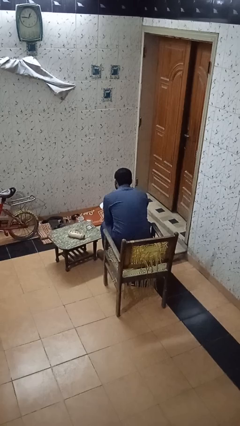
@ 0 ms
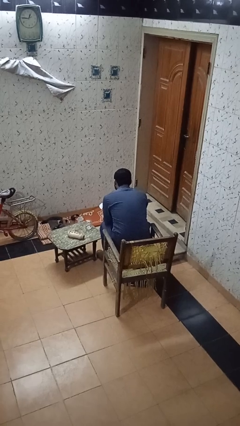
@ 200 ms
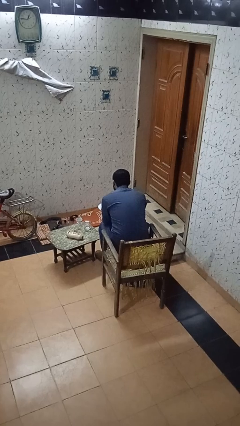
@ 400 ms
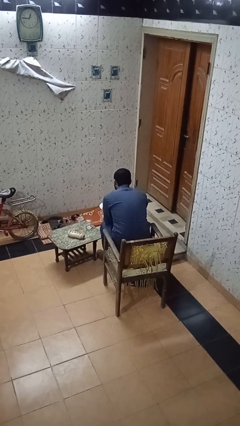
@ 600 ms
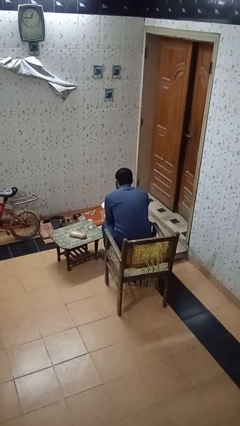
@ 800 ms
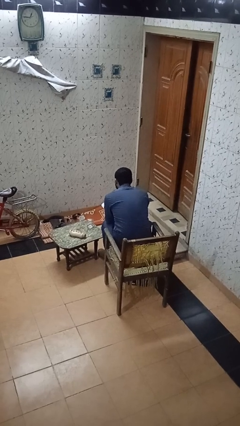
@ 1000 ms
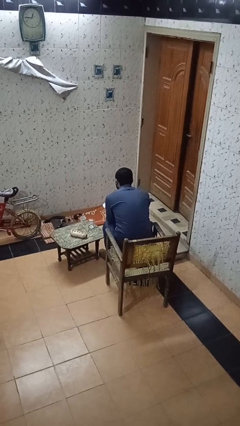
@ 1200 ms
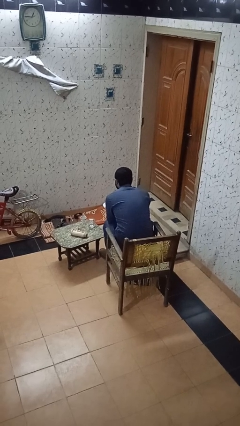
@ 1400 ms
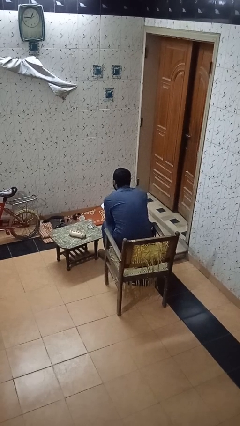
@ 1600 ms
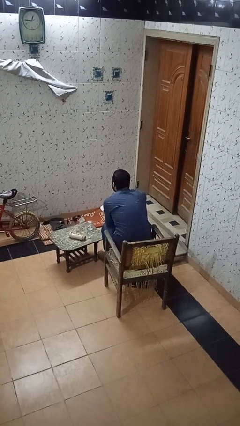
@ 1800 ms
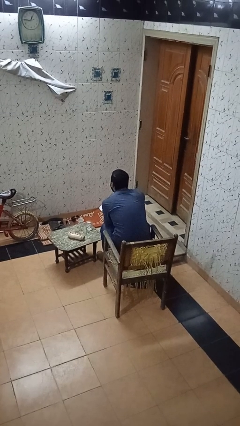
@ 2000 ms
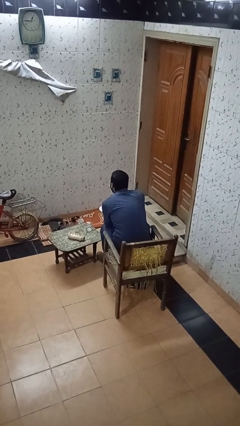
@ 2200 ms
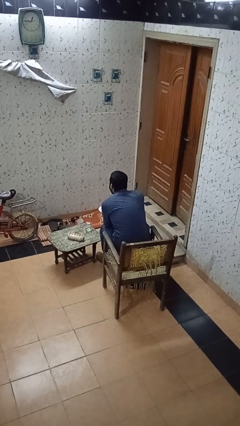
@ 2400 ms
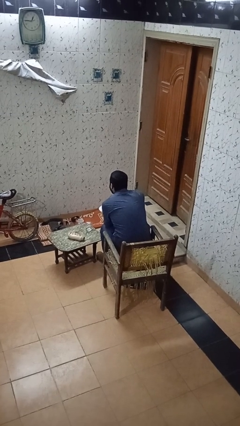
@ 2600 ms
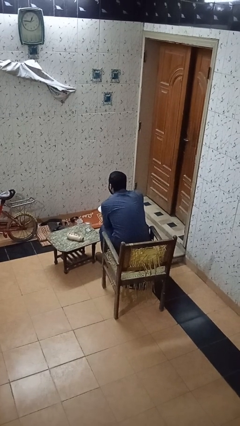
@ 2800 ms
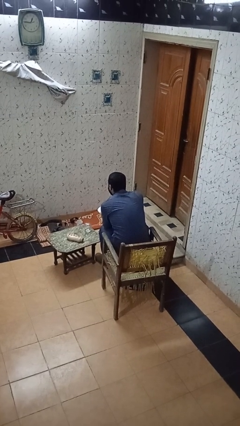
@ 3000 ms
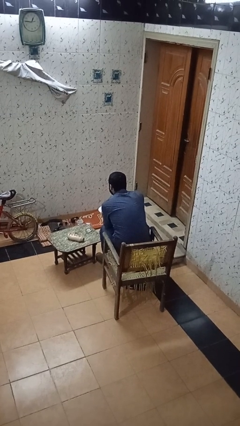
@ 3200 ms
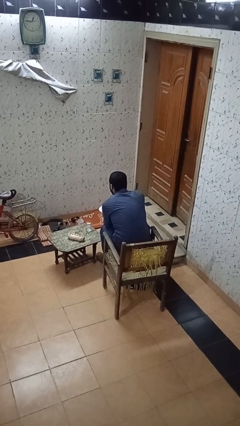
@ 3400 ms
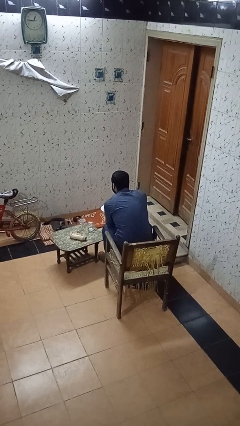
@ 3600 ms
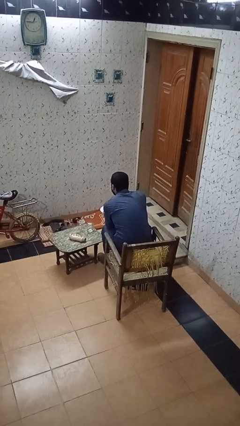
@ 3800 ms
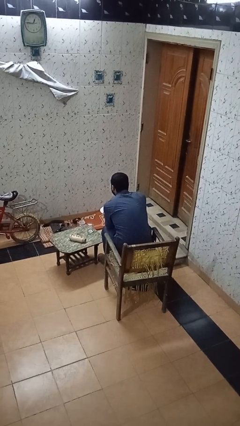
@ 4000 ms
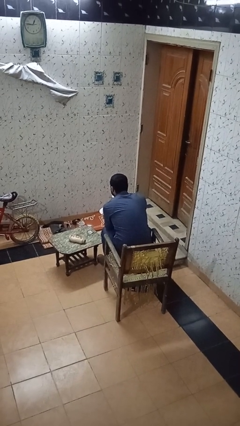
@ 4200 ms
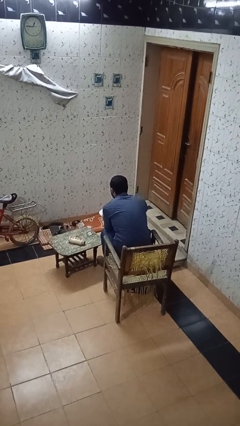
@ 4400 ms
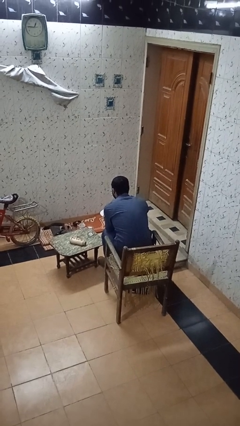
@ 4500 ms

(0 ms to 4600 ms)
person eats with utensil

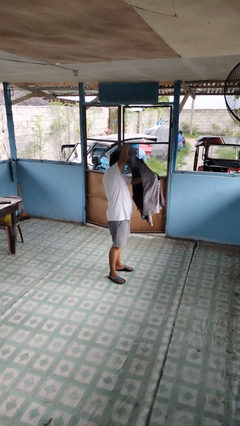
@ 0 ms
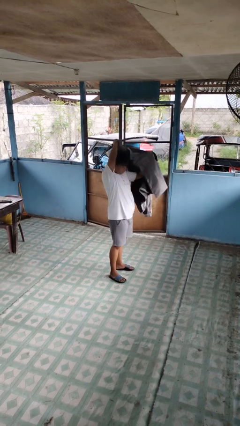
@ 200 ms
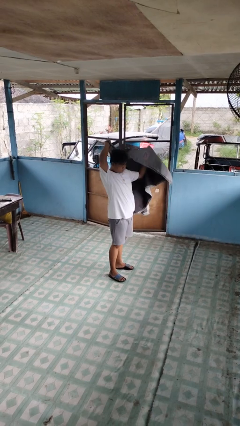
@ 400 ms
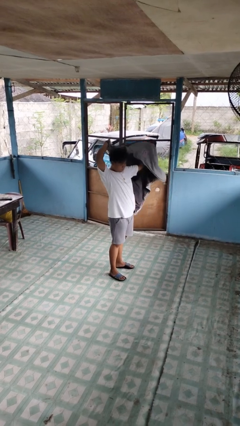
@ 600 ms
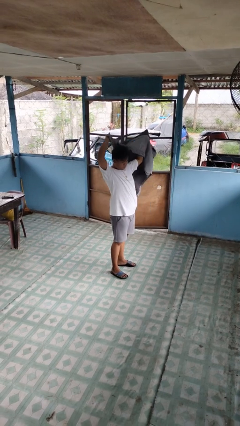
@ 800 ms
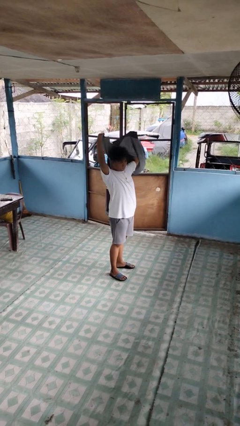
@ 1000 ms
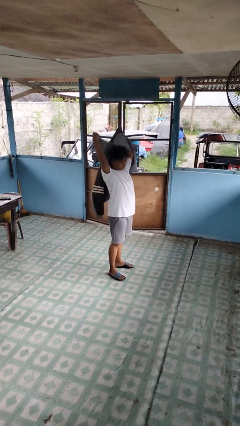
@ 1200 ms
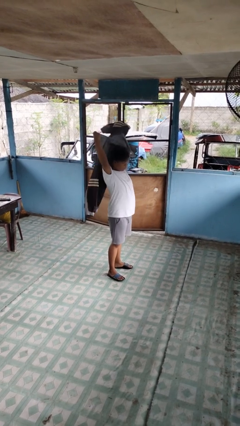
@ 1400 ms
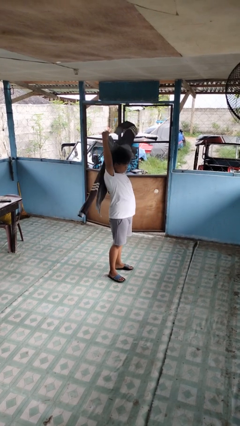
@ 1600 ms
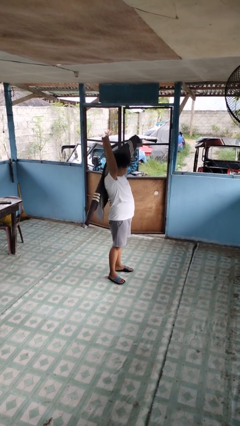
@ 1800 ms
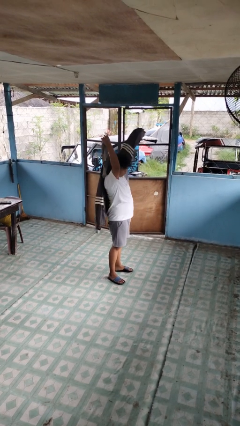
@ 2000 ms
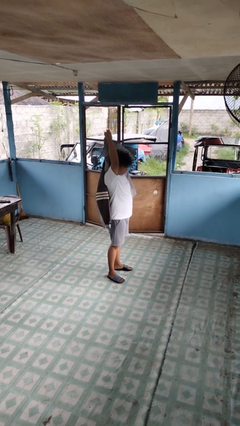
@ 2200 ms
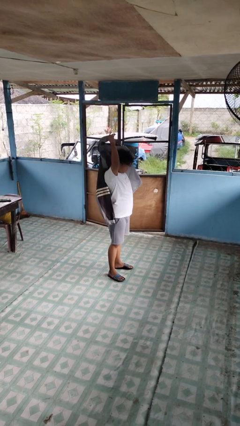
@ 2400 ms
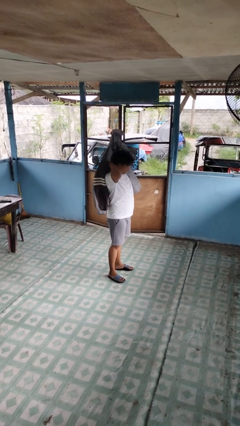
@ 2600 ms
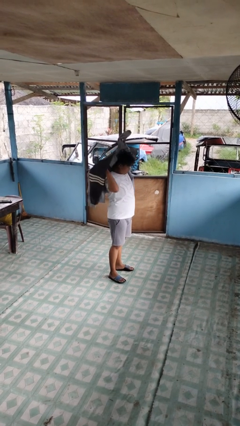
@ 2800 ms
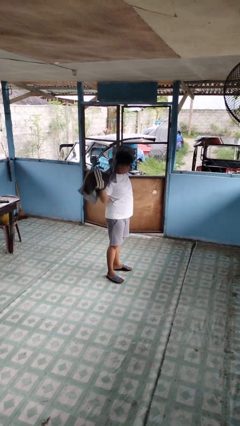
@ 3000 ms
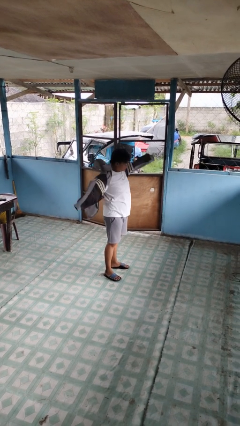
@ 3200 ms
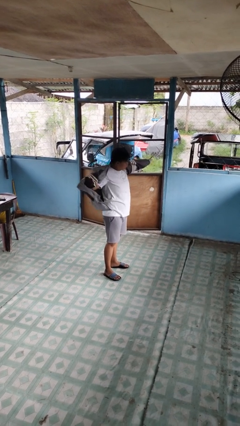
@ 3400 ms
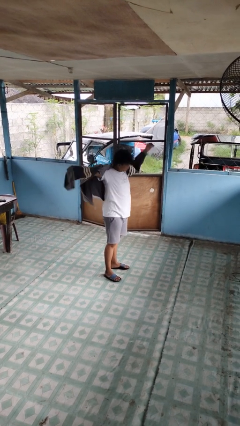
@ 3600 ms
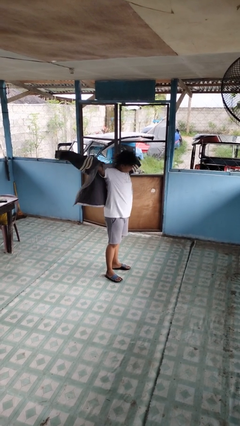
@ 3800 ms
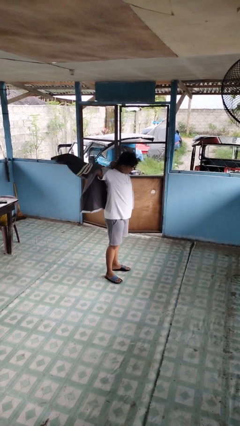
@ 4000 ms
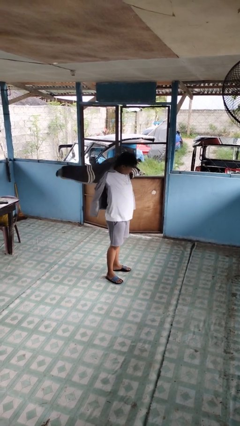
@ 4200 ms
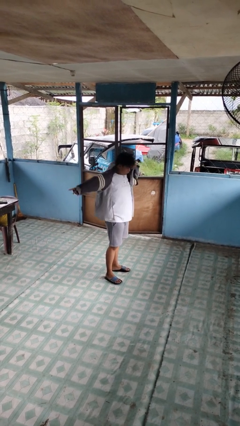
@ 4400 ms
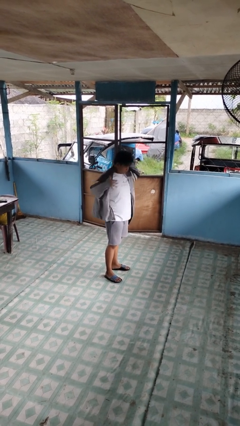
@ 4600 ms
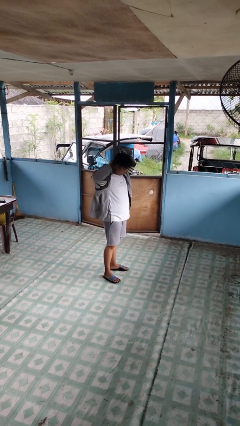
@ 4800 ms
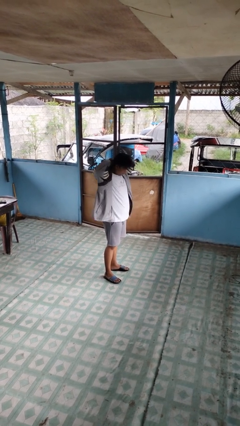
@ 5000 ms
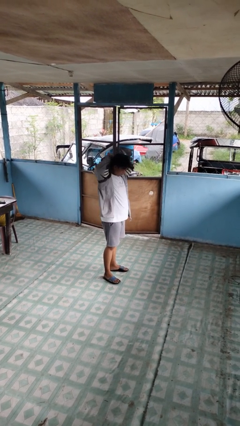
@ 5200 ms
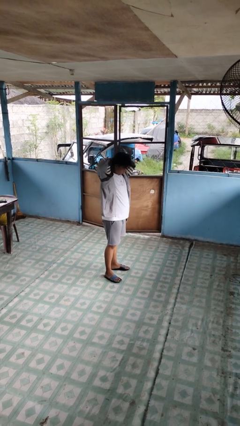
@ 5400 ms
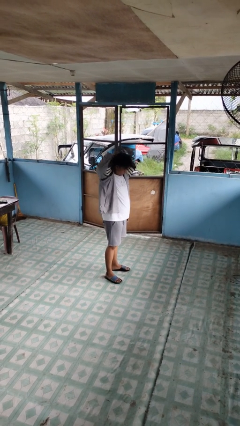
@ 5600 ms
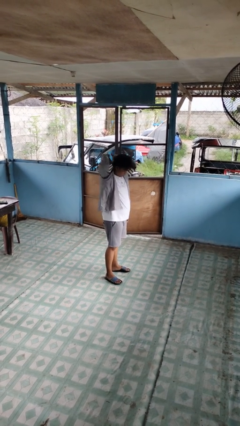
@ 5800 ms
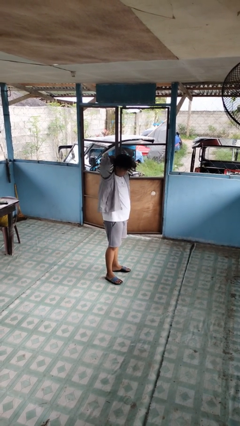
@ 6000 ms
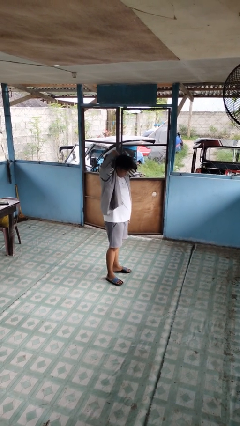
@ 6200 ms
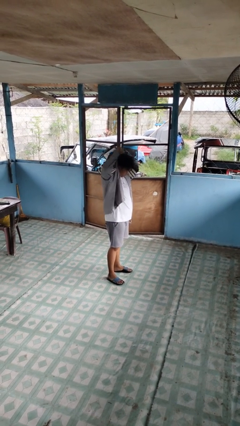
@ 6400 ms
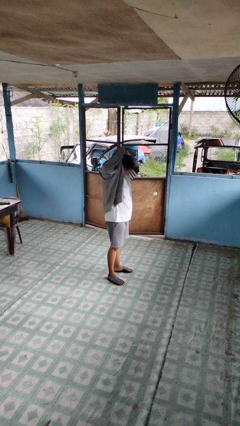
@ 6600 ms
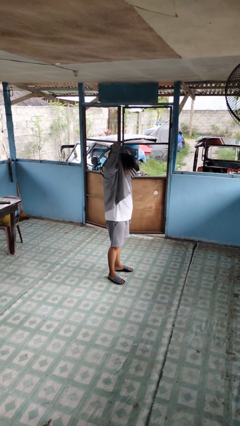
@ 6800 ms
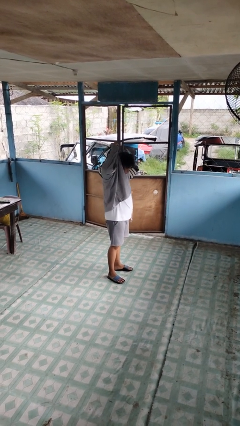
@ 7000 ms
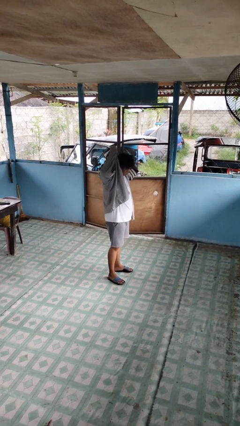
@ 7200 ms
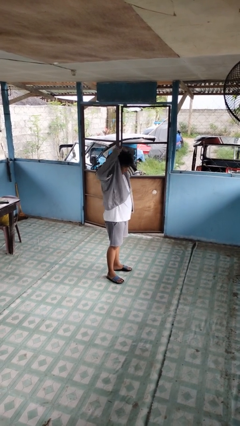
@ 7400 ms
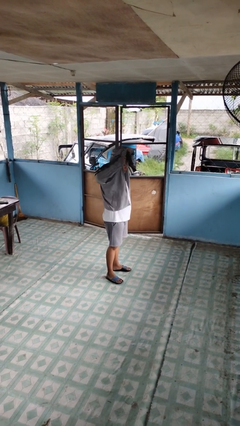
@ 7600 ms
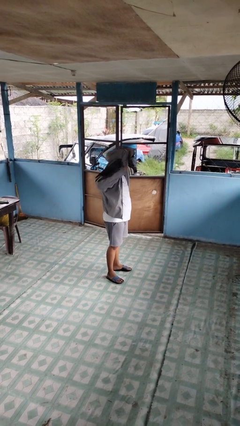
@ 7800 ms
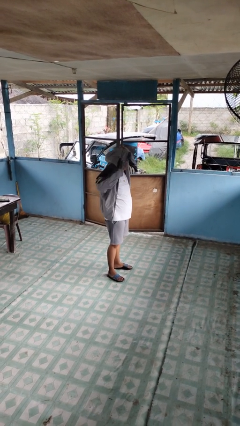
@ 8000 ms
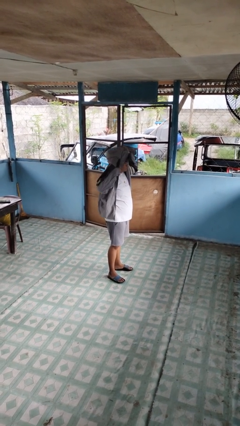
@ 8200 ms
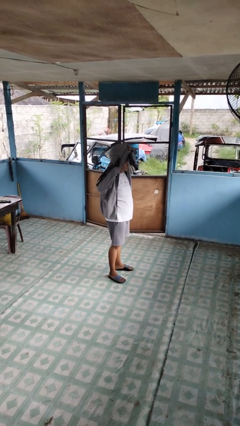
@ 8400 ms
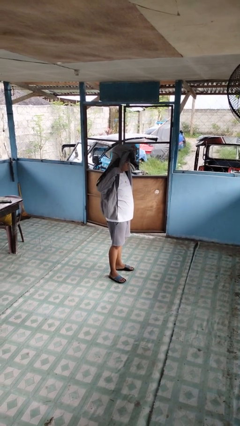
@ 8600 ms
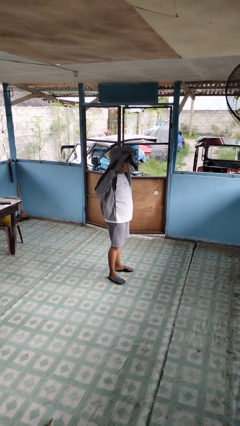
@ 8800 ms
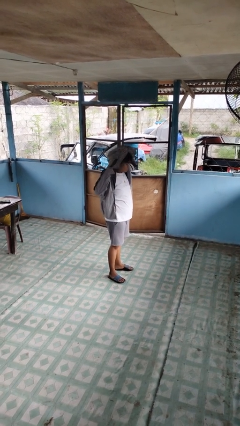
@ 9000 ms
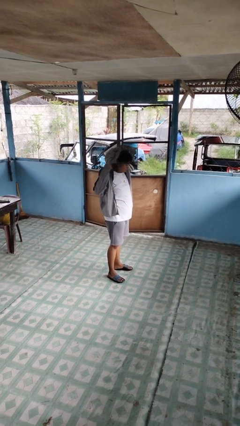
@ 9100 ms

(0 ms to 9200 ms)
person puts on hoodie

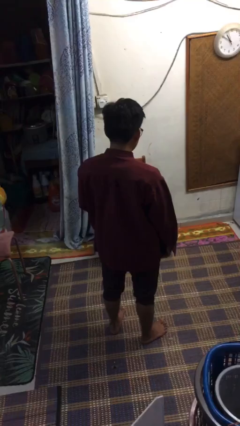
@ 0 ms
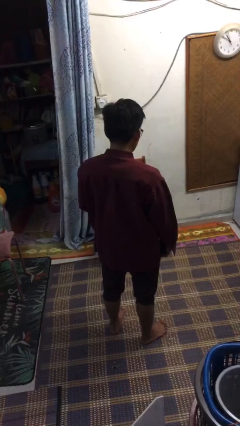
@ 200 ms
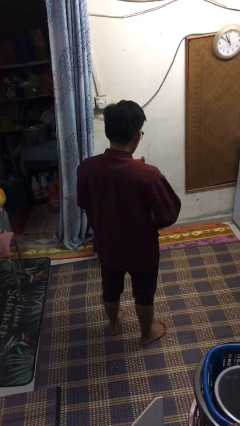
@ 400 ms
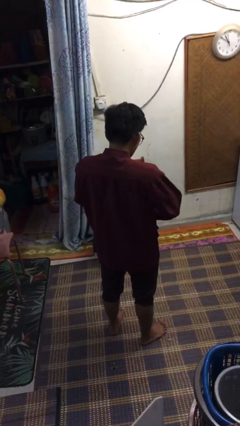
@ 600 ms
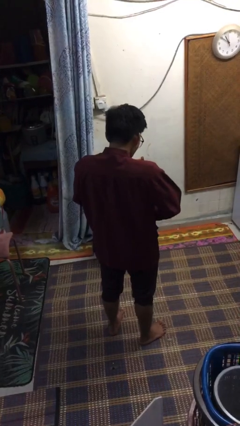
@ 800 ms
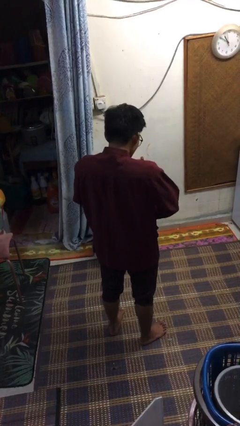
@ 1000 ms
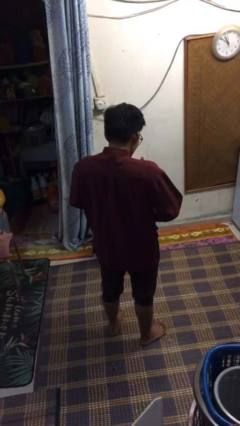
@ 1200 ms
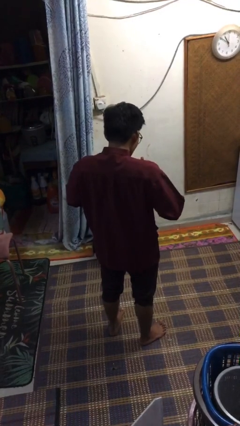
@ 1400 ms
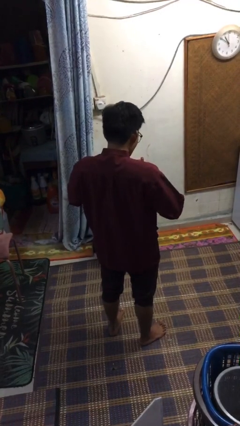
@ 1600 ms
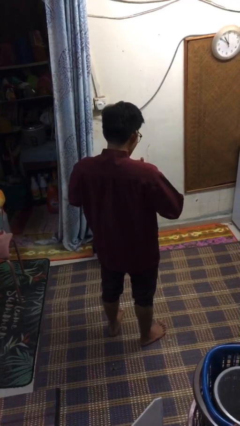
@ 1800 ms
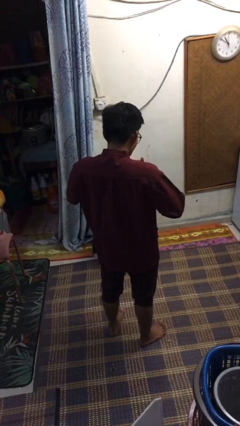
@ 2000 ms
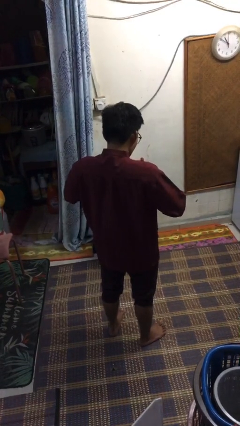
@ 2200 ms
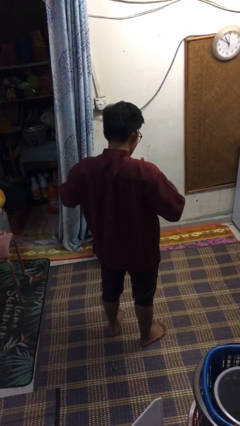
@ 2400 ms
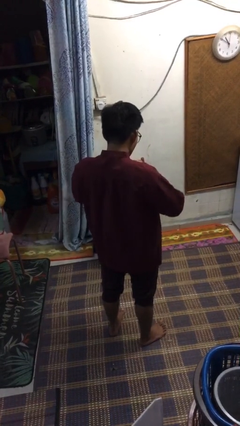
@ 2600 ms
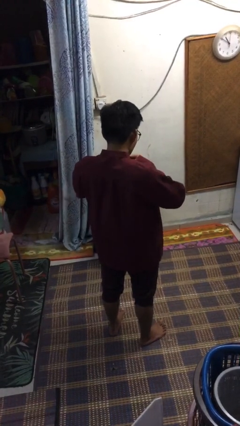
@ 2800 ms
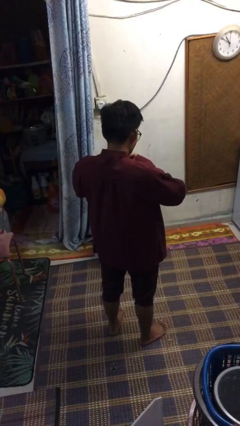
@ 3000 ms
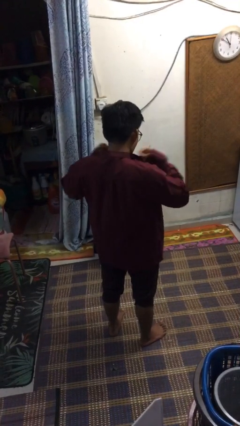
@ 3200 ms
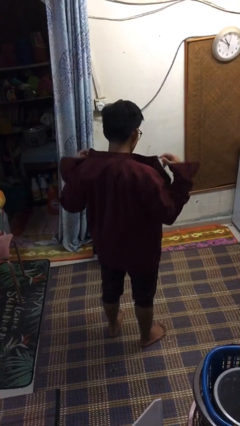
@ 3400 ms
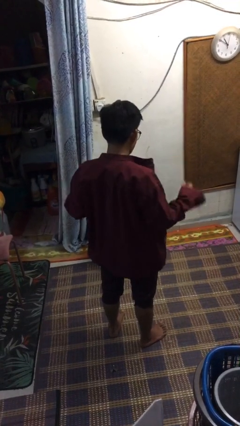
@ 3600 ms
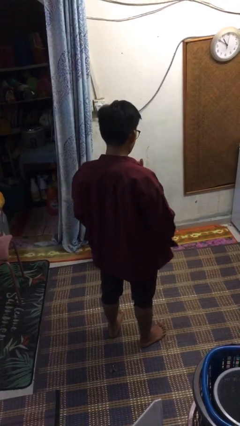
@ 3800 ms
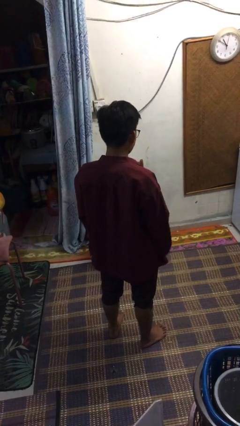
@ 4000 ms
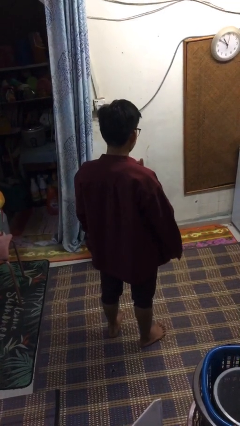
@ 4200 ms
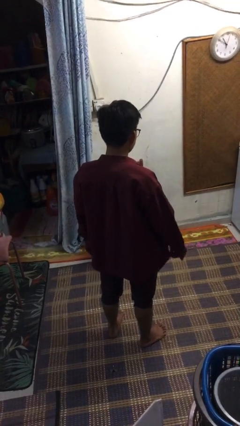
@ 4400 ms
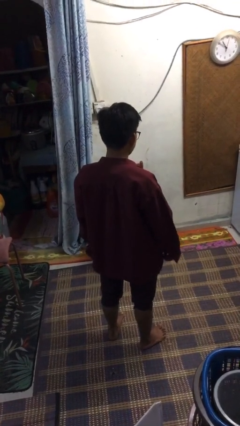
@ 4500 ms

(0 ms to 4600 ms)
person unbuttons shirt
